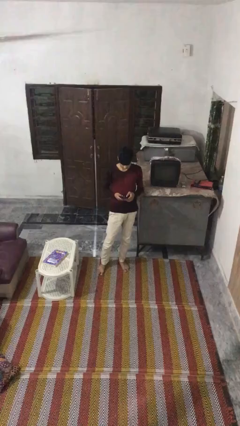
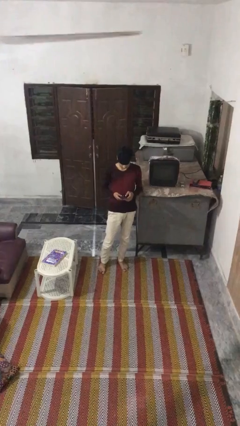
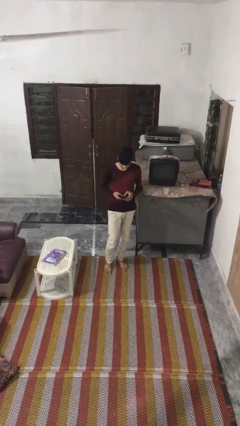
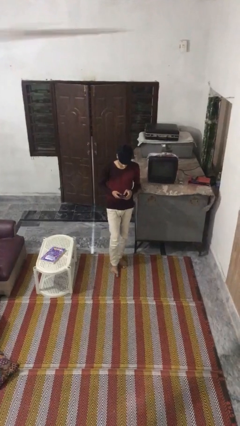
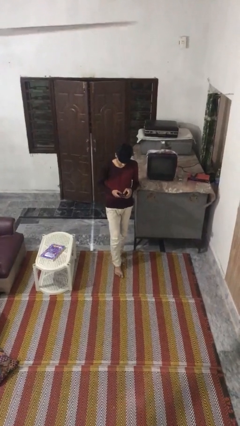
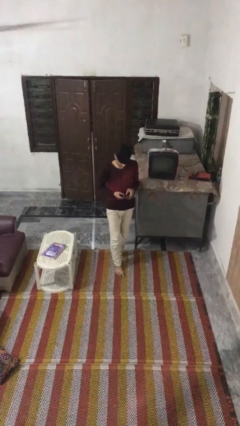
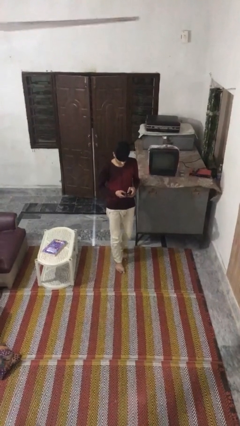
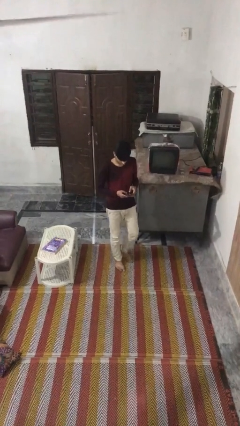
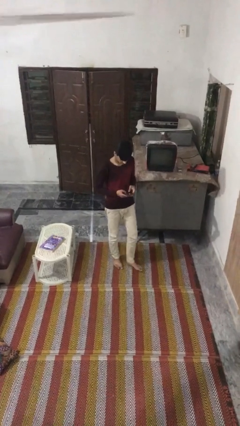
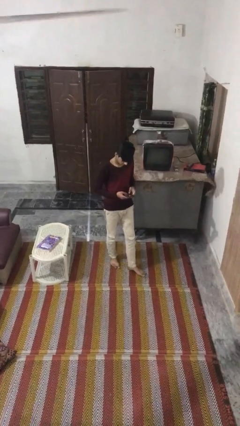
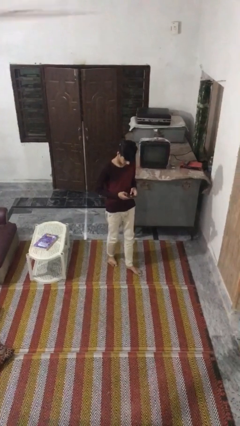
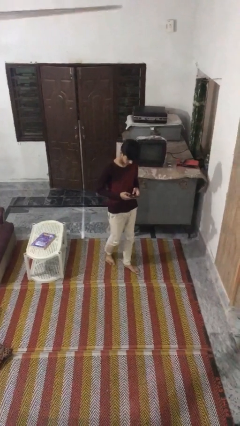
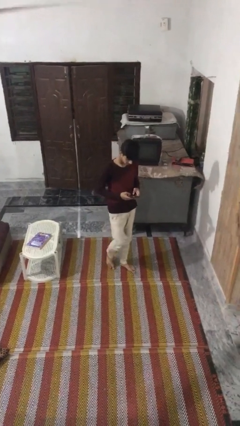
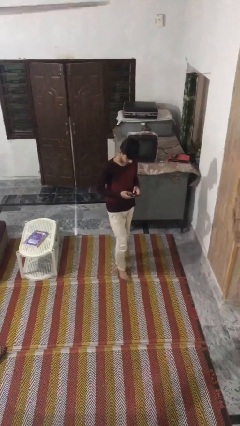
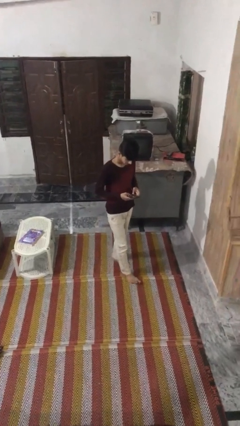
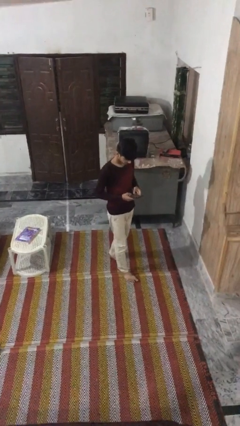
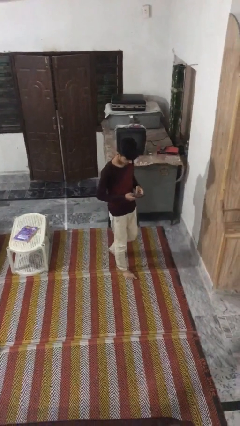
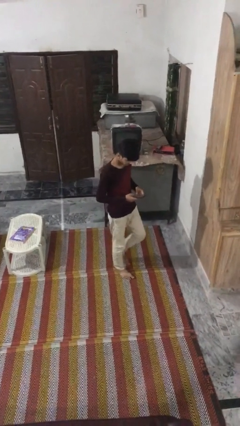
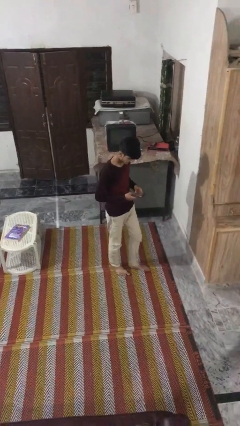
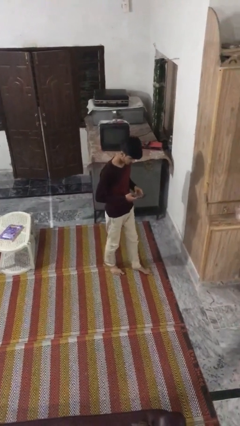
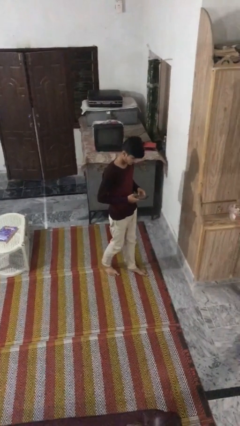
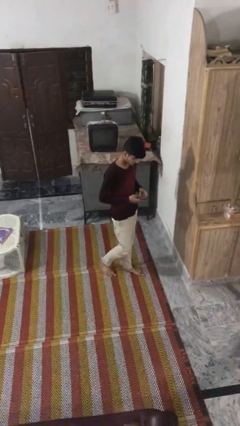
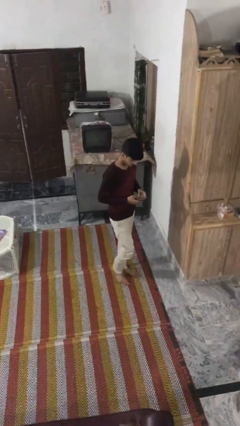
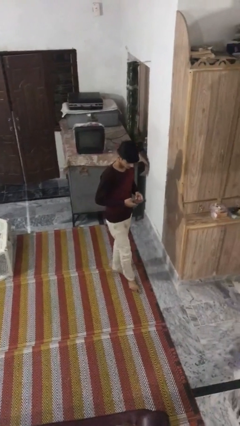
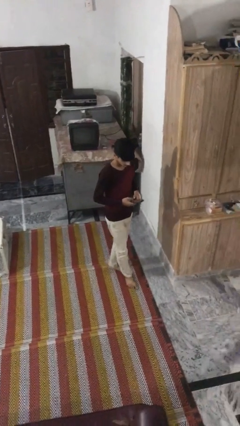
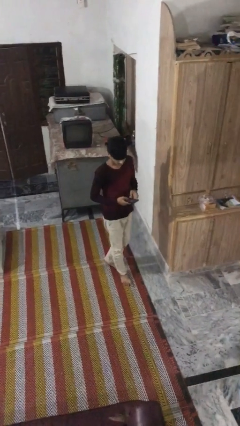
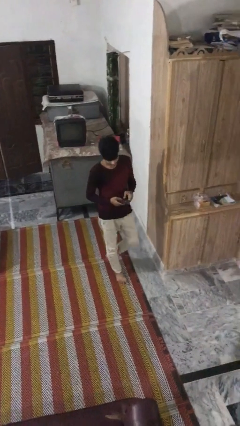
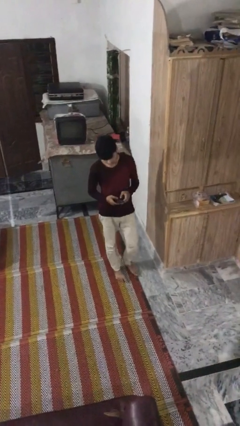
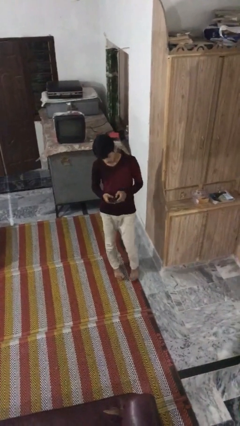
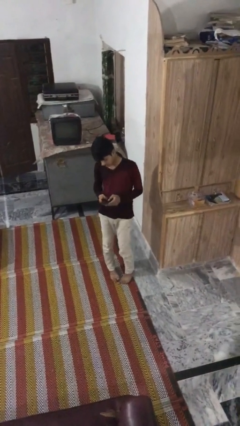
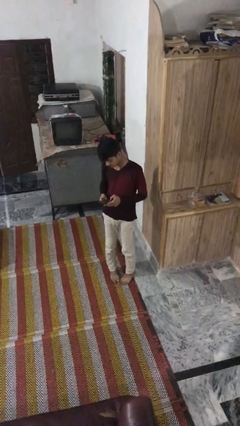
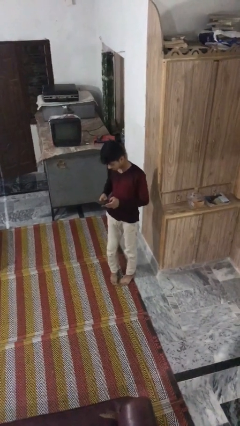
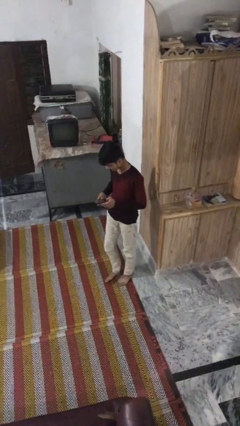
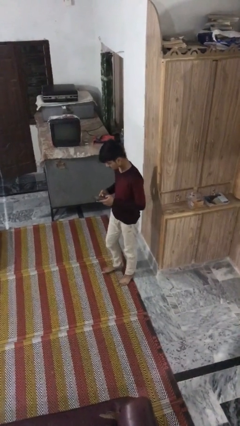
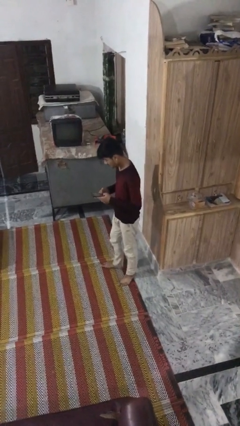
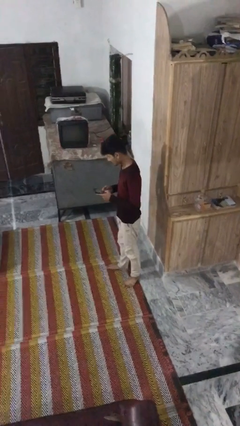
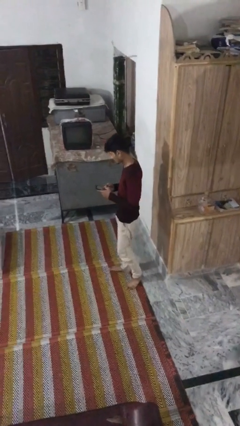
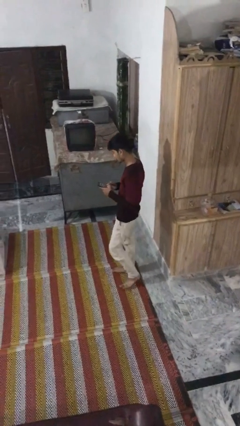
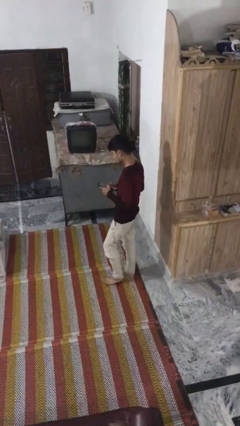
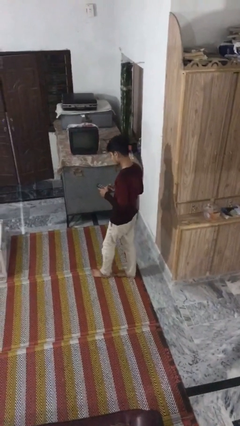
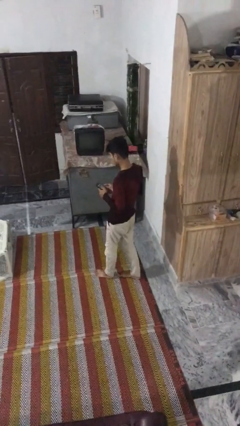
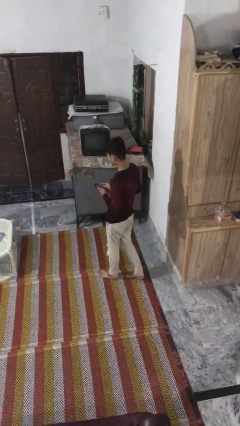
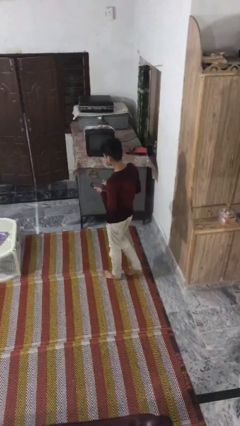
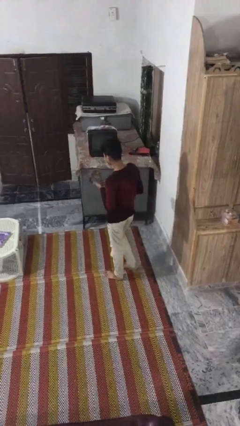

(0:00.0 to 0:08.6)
person texts on phone

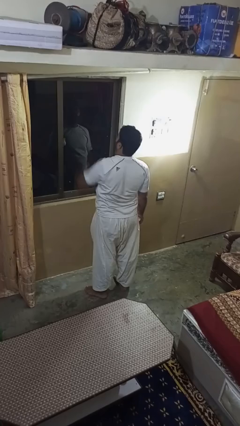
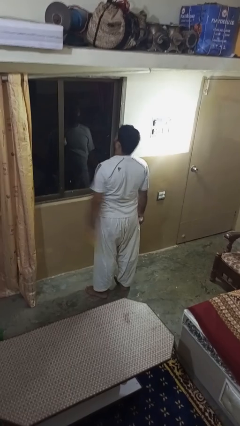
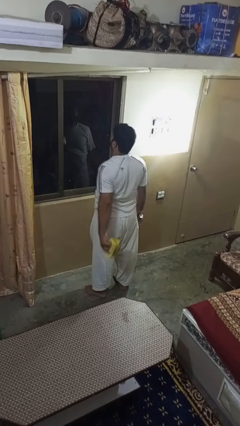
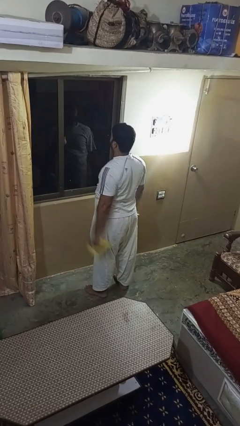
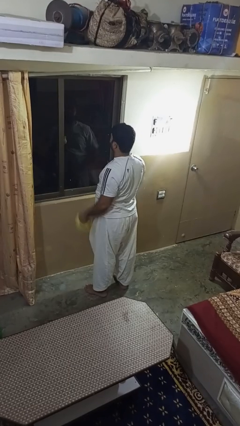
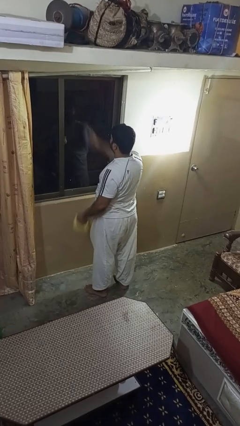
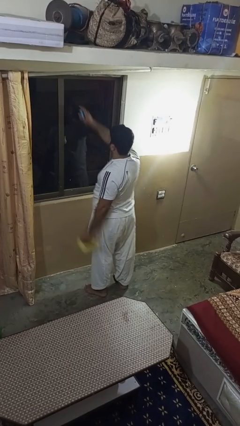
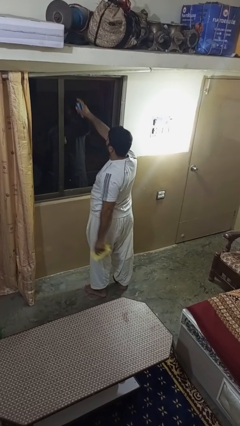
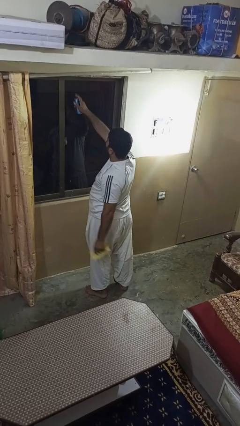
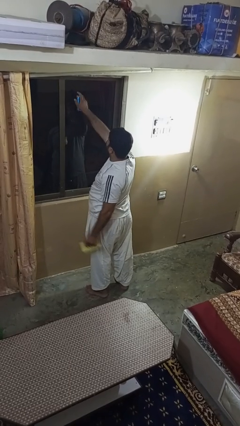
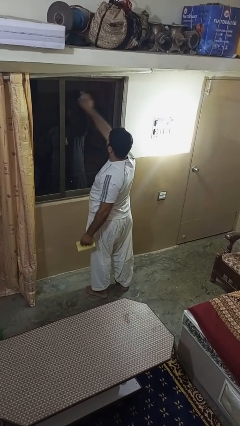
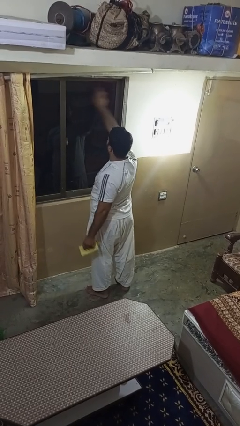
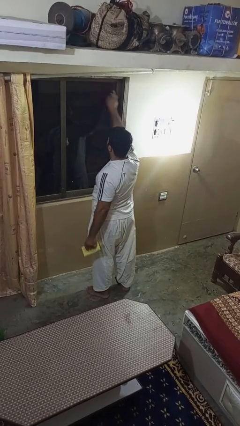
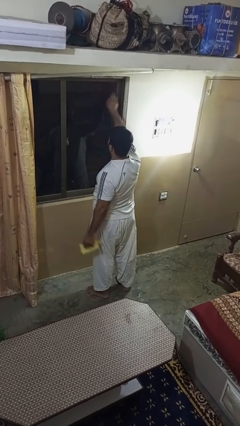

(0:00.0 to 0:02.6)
person sprays from bottle

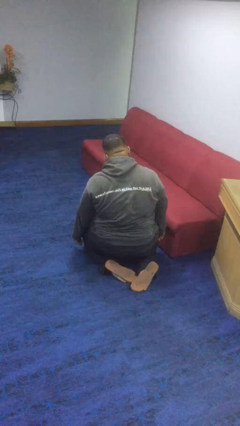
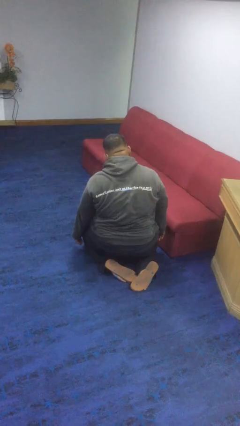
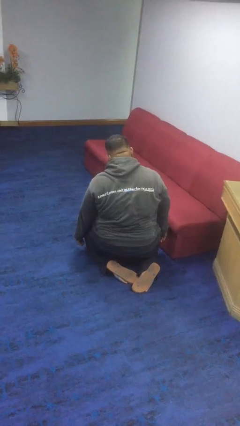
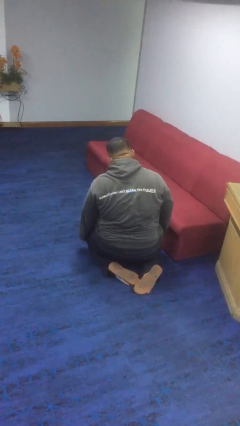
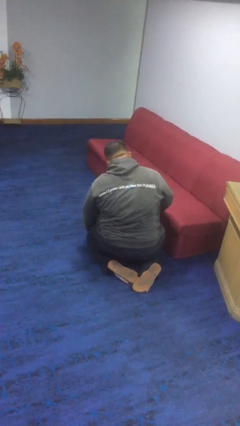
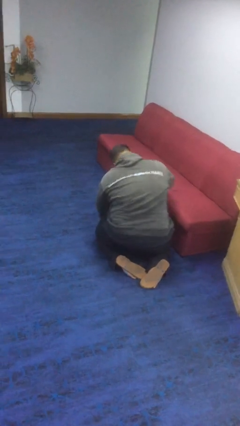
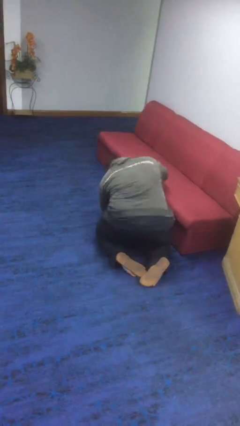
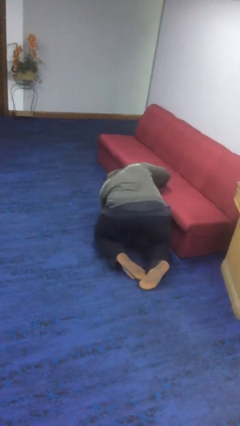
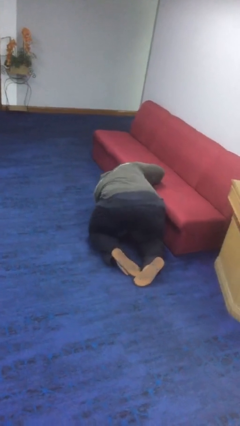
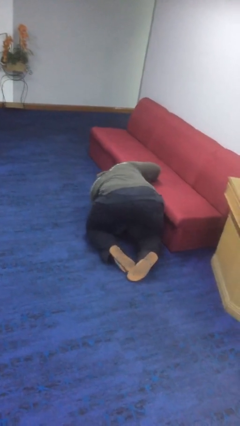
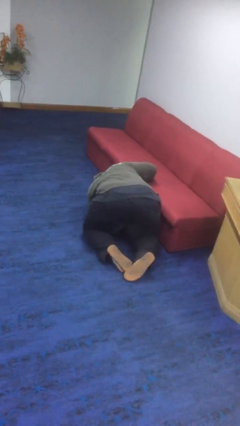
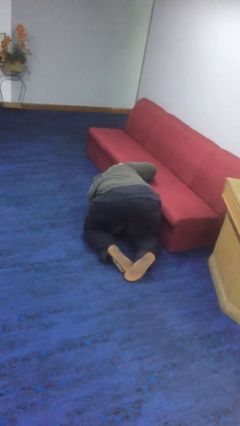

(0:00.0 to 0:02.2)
person searches under couch

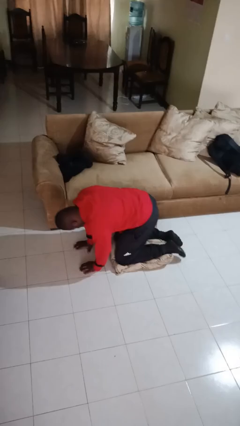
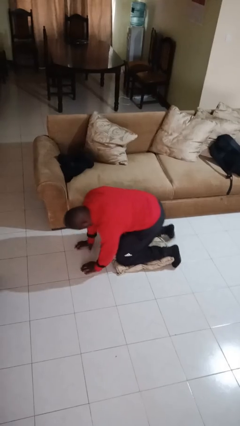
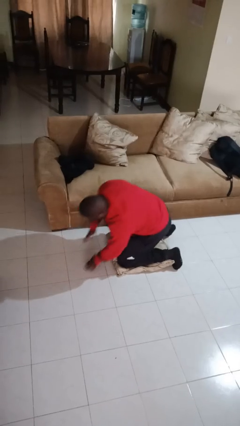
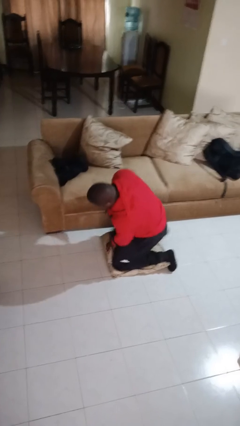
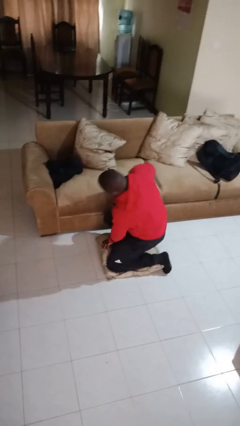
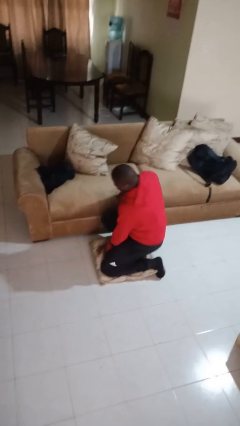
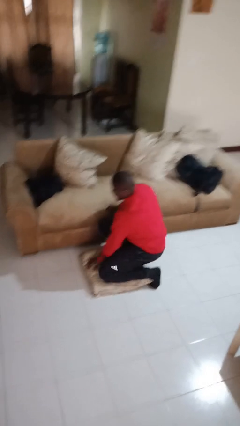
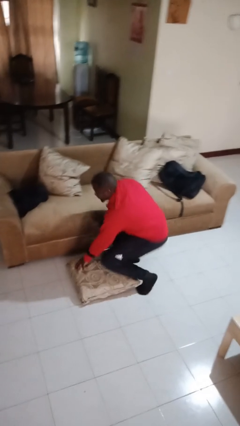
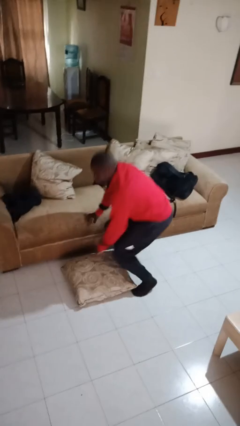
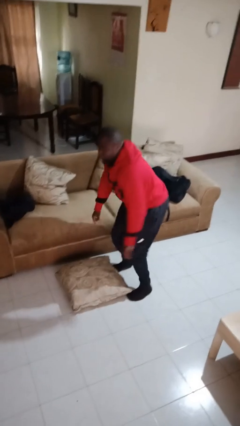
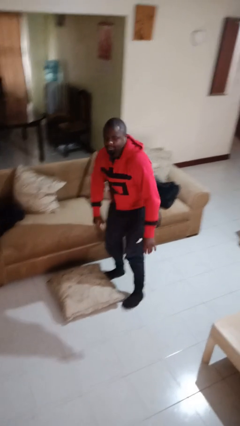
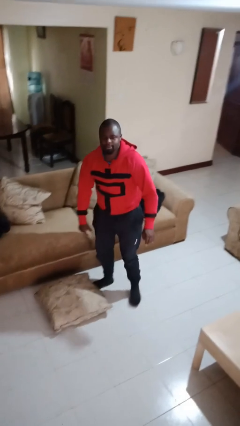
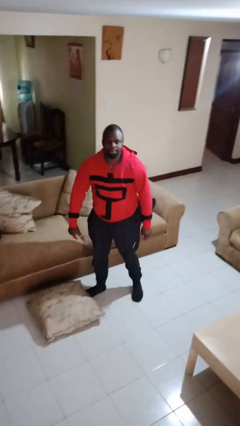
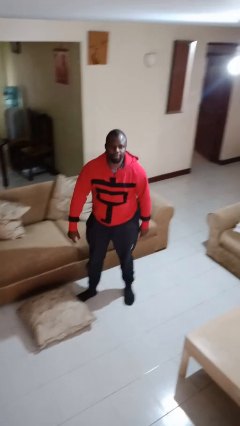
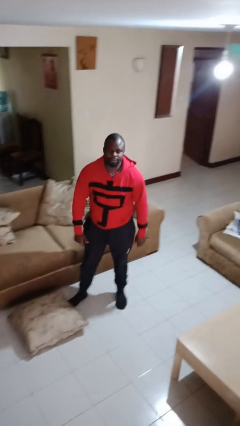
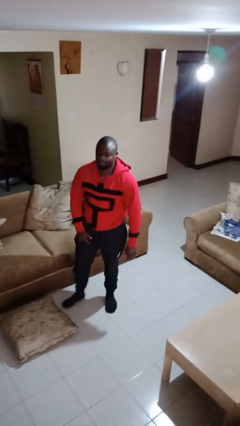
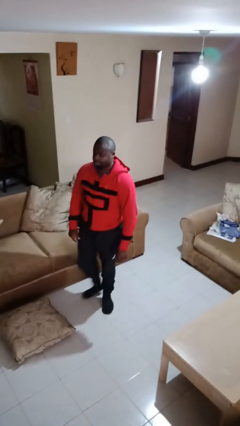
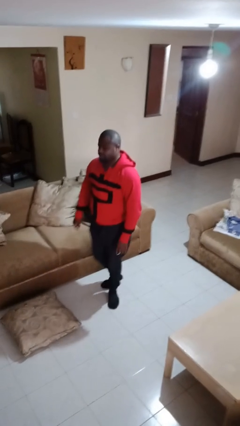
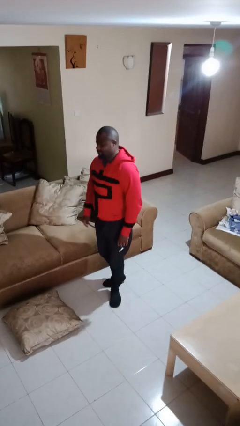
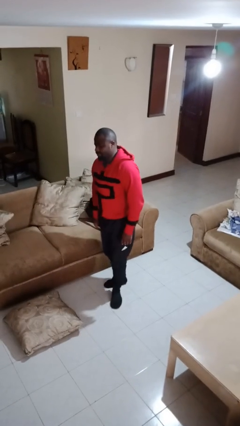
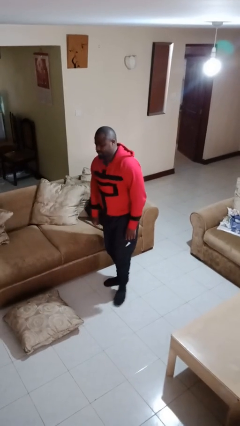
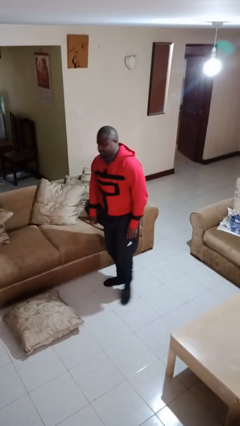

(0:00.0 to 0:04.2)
person stands up from floor
